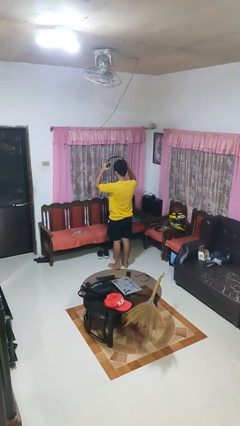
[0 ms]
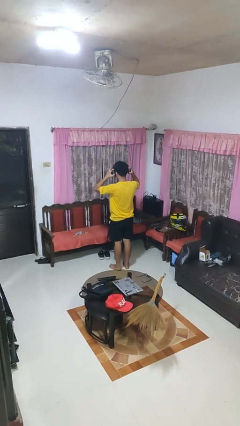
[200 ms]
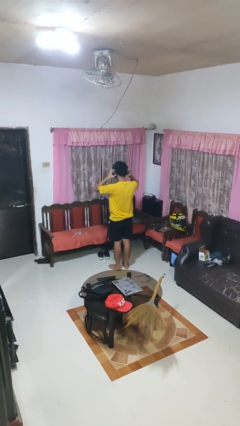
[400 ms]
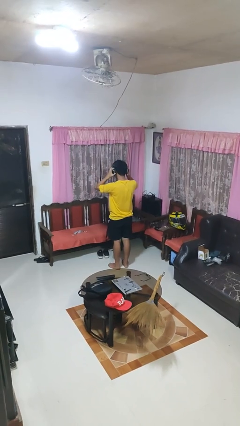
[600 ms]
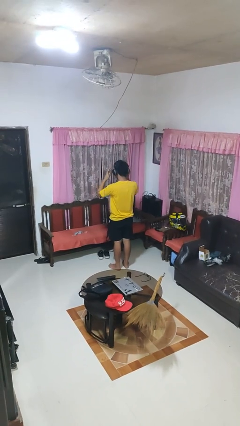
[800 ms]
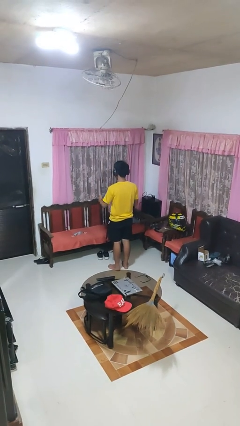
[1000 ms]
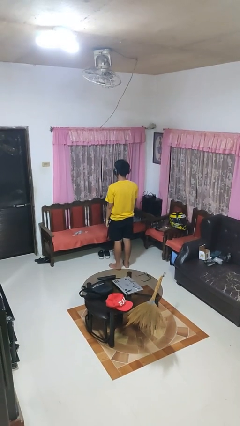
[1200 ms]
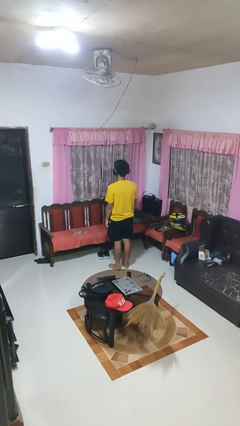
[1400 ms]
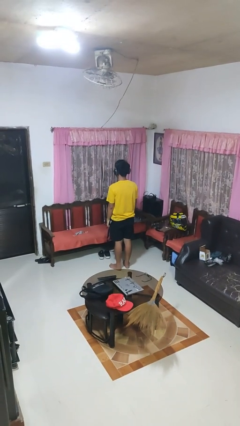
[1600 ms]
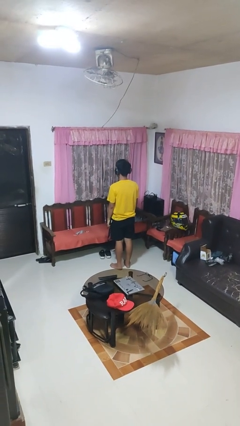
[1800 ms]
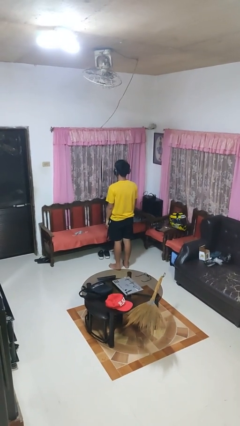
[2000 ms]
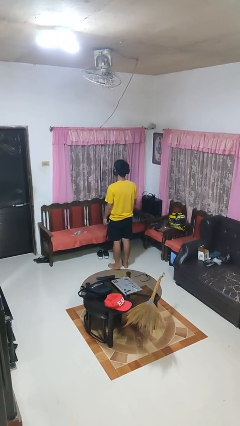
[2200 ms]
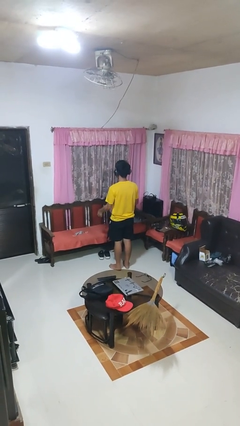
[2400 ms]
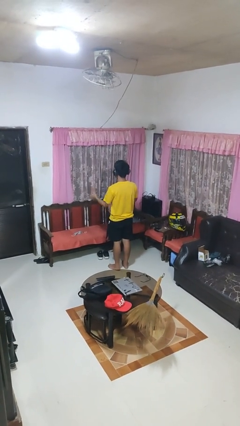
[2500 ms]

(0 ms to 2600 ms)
person puts on headphones

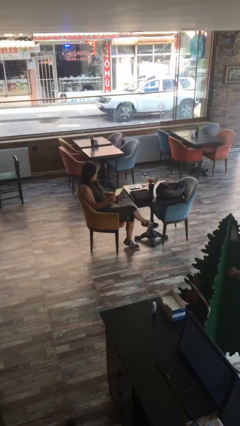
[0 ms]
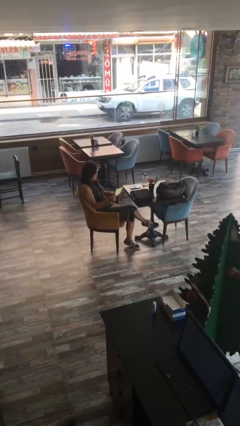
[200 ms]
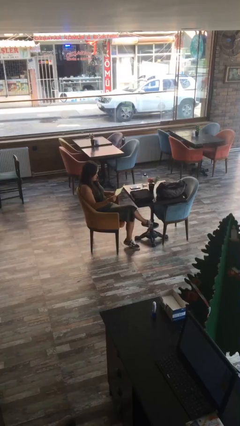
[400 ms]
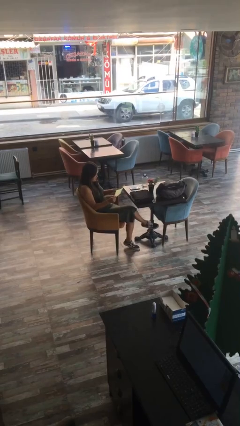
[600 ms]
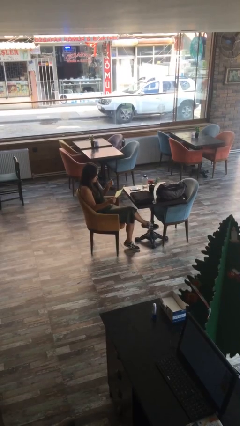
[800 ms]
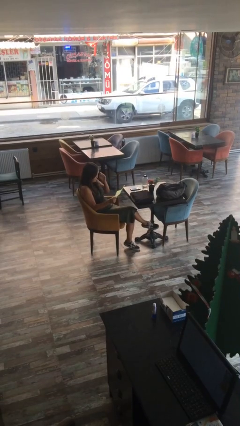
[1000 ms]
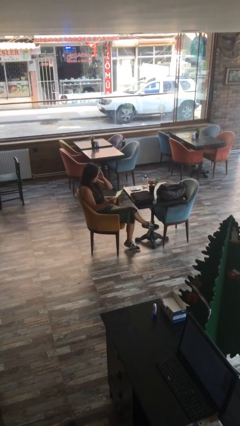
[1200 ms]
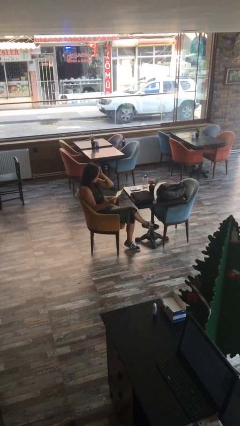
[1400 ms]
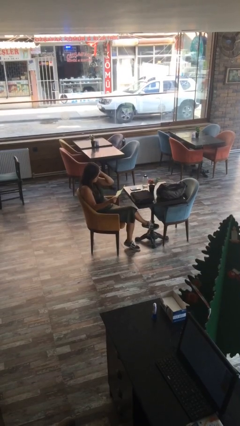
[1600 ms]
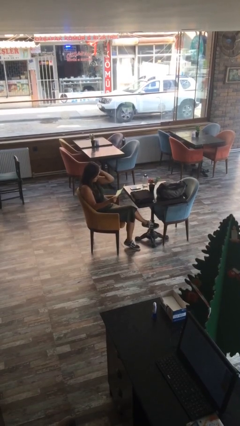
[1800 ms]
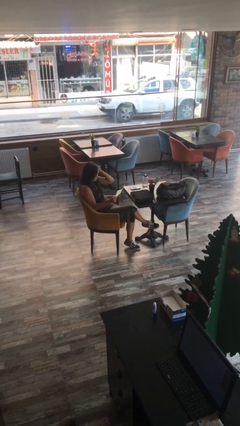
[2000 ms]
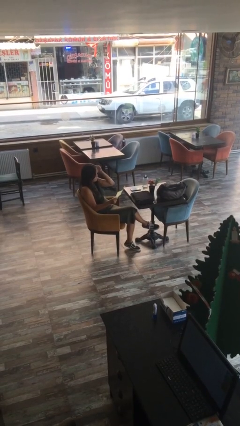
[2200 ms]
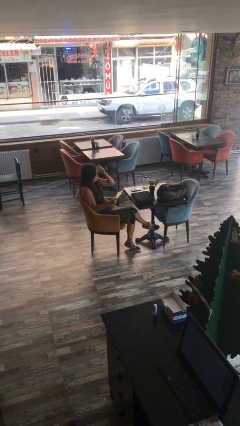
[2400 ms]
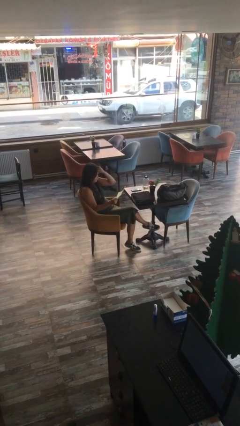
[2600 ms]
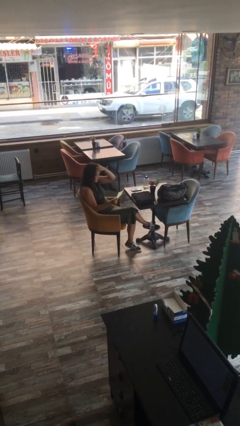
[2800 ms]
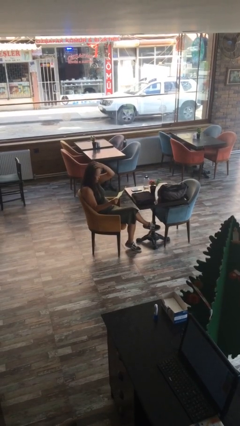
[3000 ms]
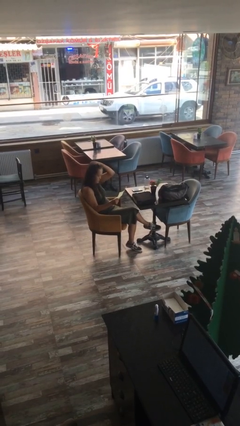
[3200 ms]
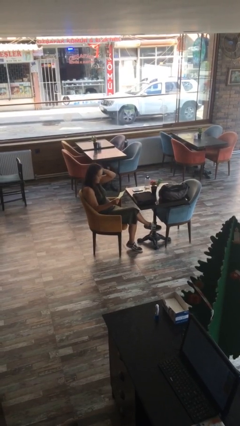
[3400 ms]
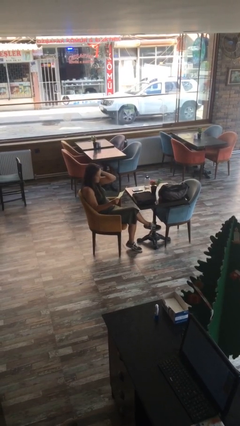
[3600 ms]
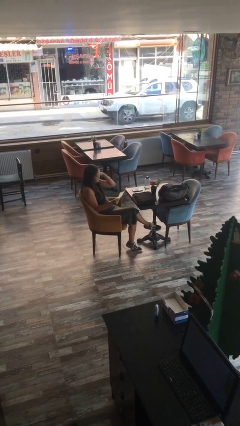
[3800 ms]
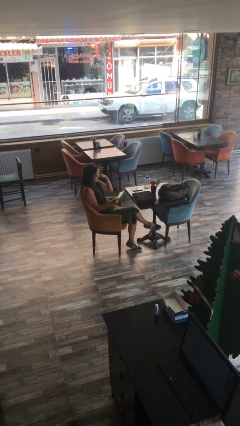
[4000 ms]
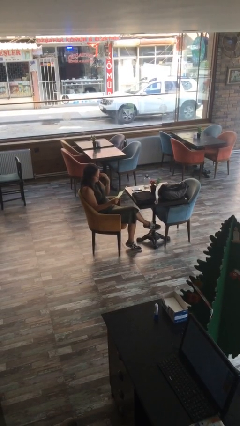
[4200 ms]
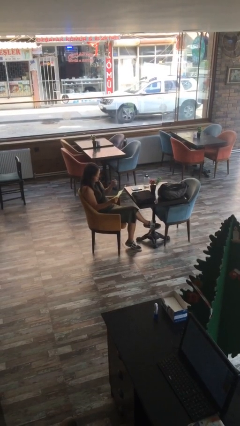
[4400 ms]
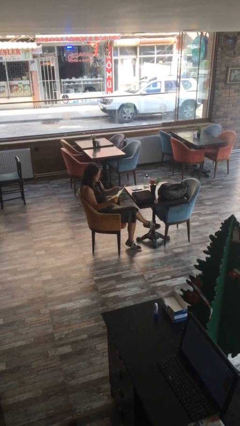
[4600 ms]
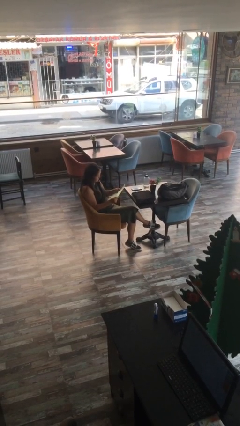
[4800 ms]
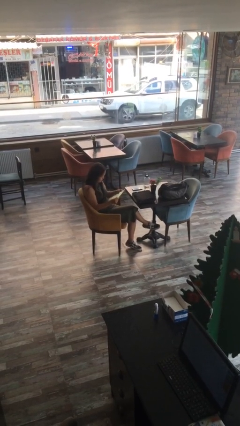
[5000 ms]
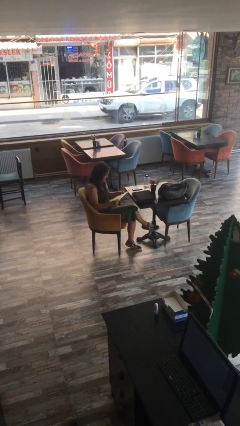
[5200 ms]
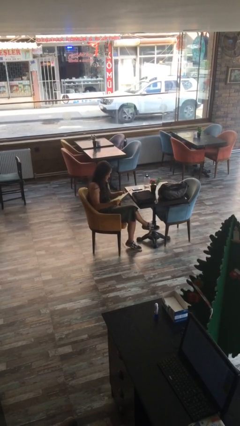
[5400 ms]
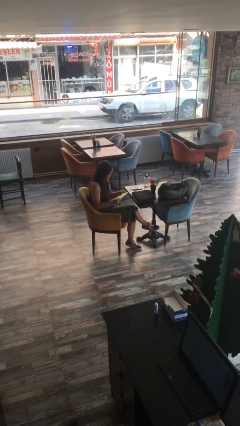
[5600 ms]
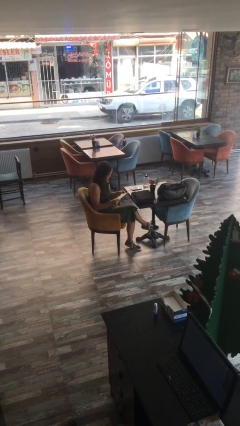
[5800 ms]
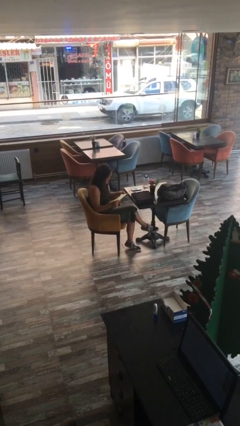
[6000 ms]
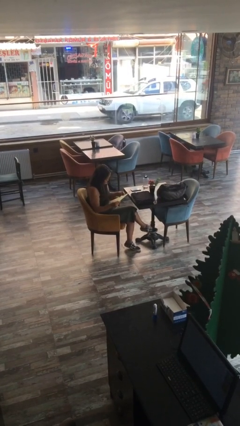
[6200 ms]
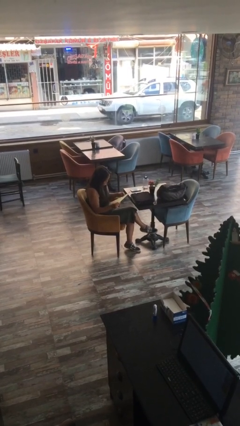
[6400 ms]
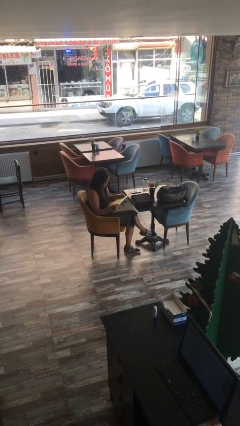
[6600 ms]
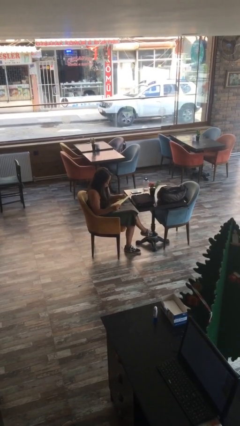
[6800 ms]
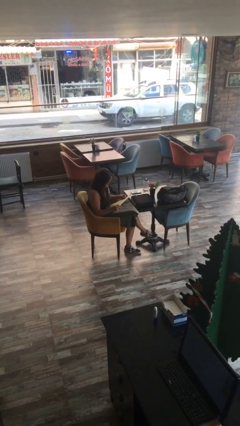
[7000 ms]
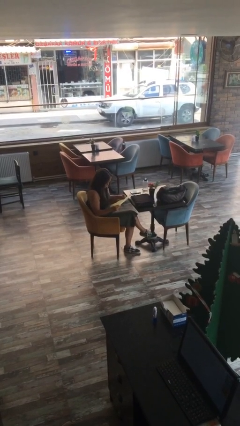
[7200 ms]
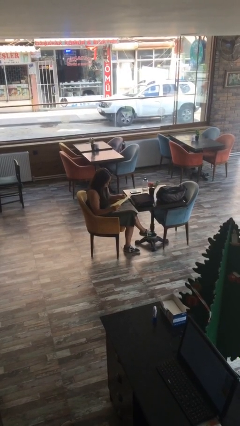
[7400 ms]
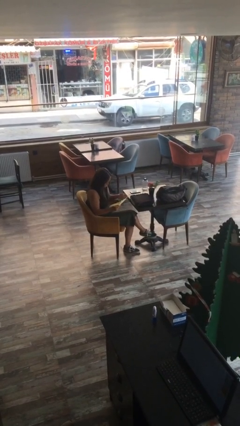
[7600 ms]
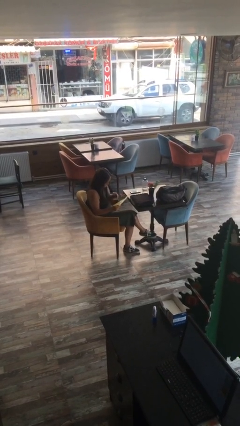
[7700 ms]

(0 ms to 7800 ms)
person reads document

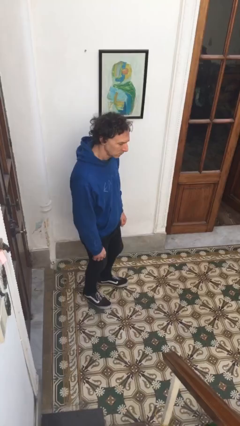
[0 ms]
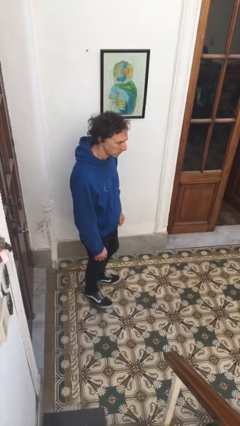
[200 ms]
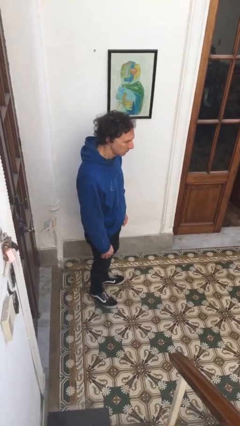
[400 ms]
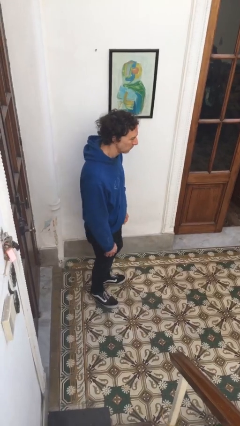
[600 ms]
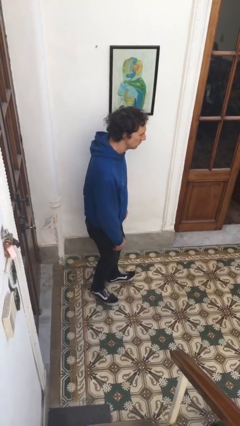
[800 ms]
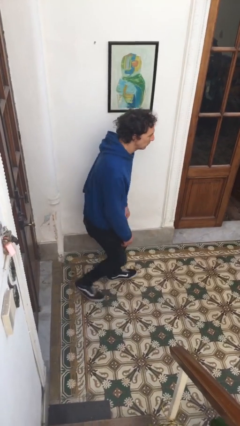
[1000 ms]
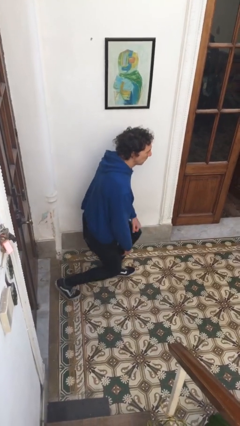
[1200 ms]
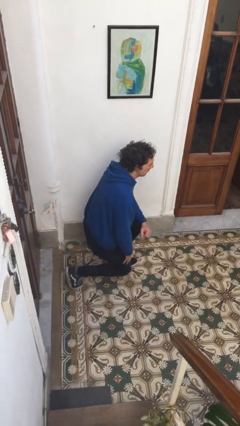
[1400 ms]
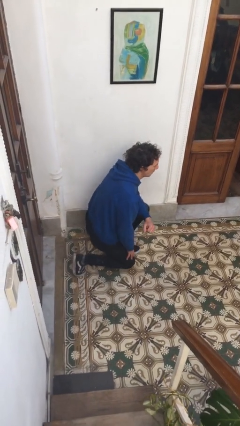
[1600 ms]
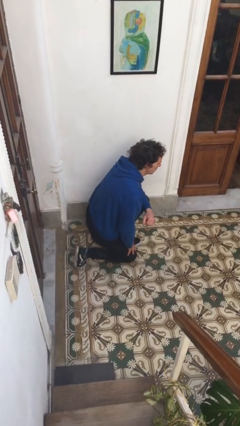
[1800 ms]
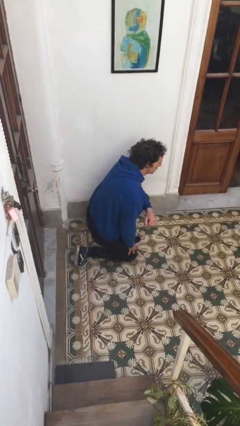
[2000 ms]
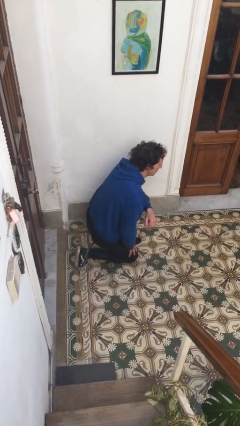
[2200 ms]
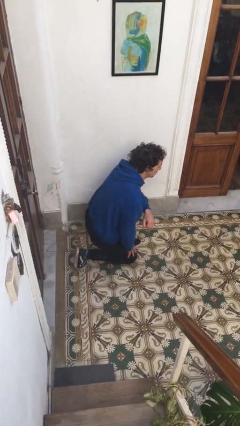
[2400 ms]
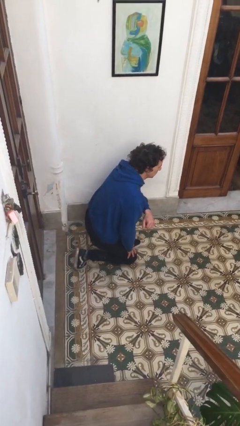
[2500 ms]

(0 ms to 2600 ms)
person kneels

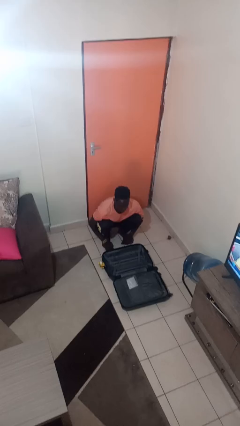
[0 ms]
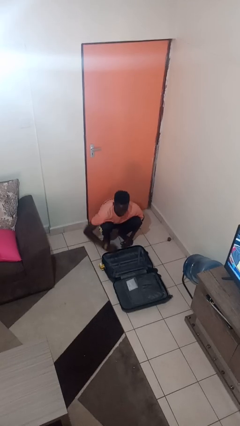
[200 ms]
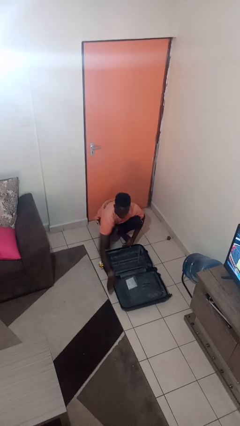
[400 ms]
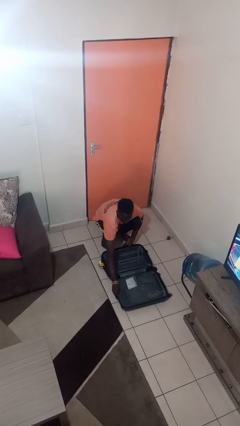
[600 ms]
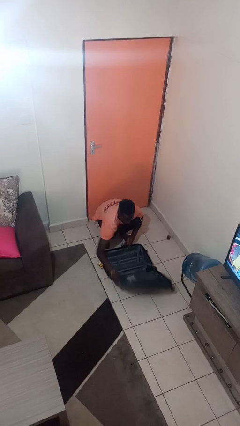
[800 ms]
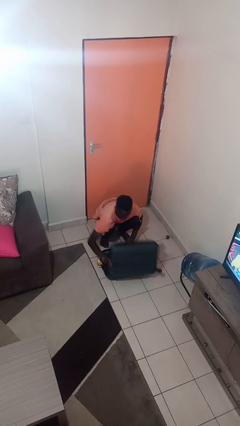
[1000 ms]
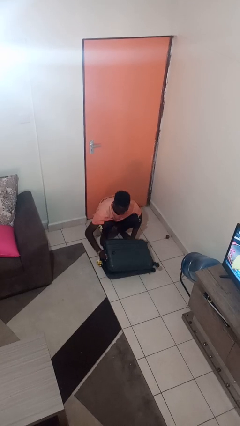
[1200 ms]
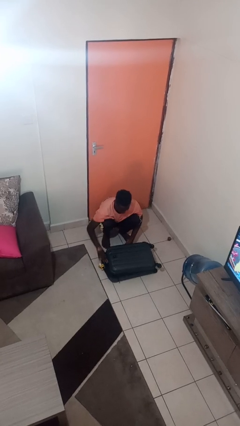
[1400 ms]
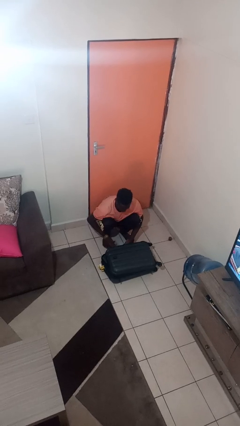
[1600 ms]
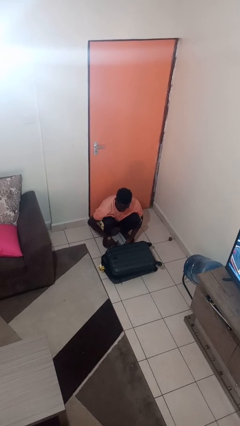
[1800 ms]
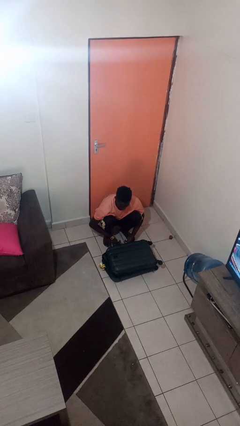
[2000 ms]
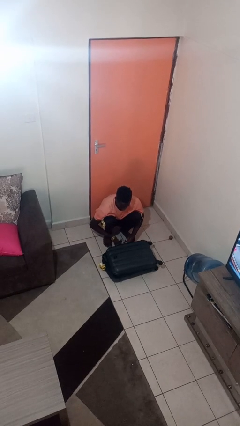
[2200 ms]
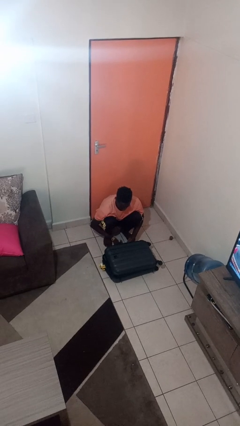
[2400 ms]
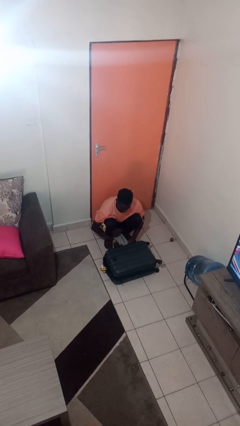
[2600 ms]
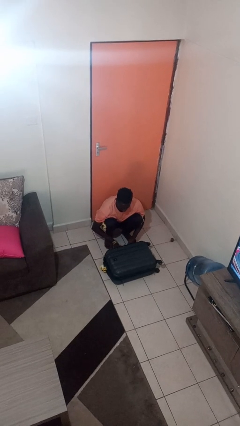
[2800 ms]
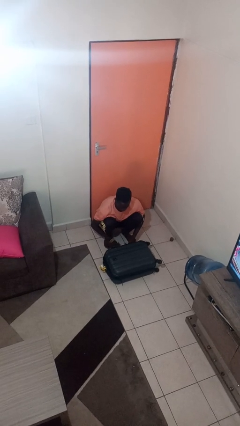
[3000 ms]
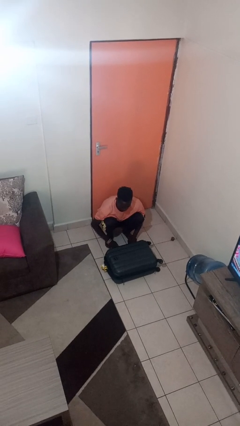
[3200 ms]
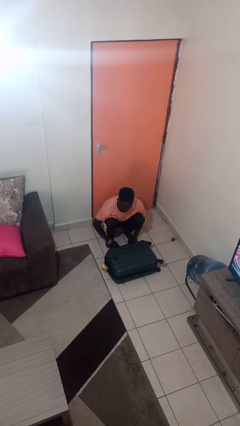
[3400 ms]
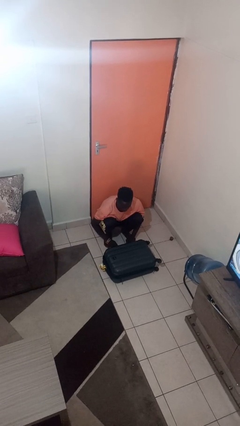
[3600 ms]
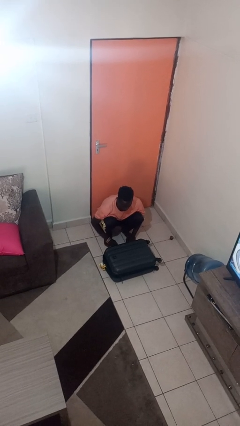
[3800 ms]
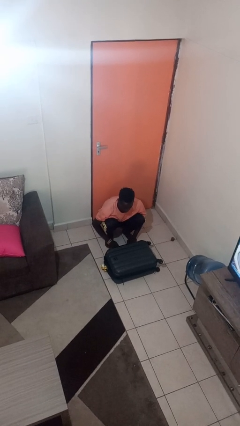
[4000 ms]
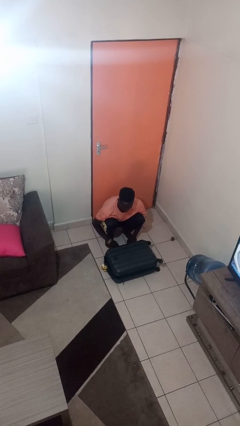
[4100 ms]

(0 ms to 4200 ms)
person closes suitcase

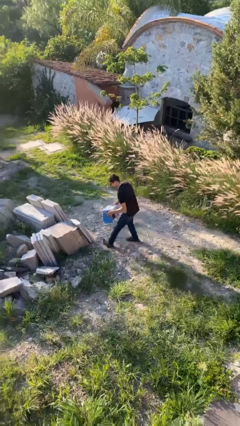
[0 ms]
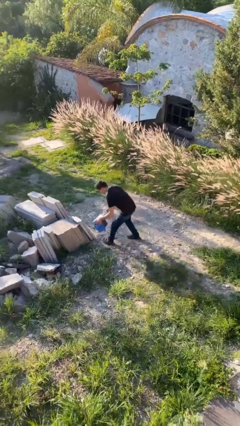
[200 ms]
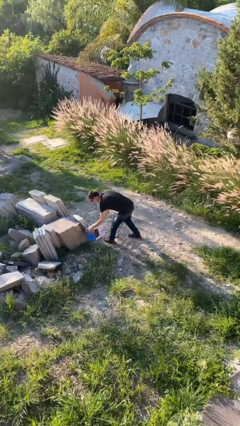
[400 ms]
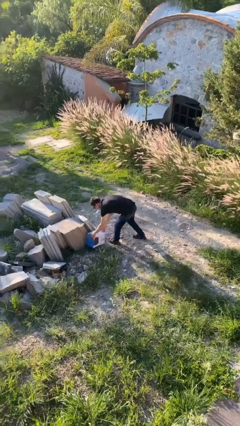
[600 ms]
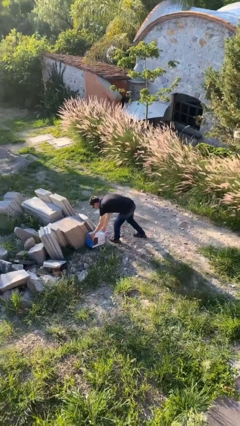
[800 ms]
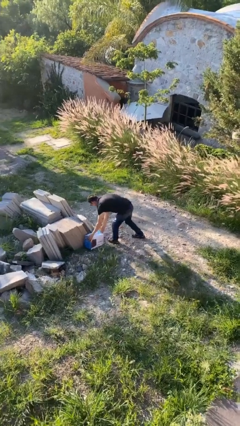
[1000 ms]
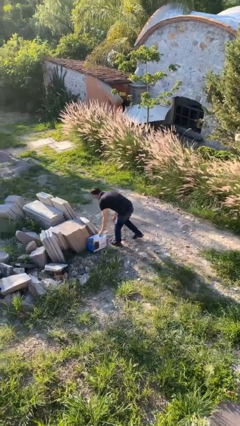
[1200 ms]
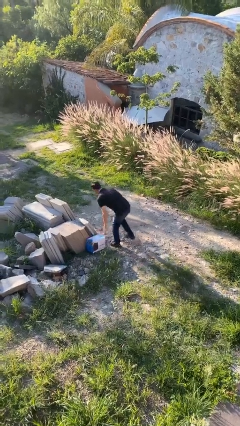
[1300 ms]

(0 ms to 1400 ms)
person puts down object on floor
